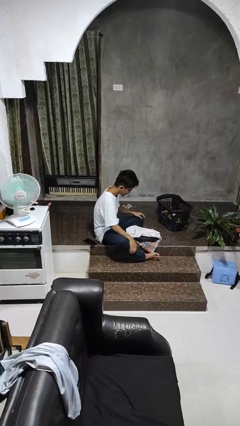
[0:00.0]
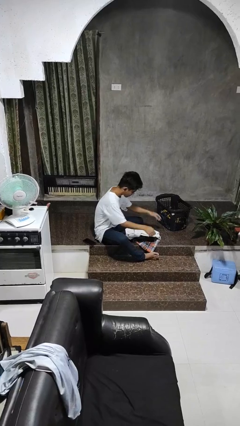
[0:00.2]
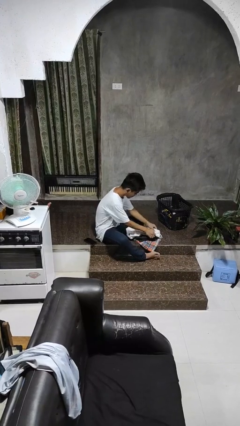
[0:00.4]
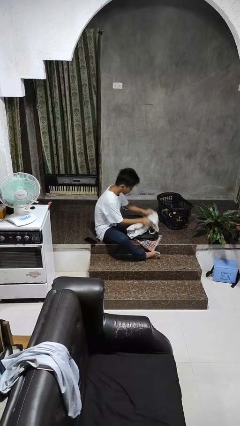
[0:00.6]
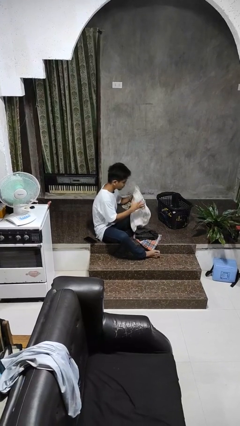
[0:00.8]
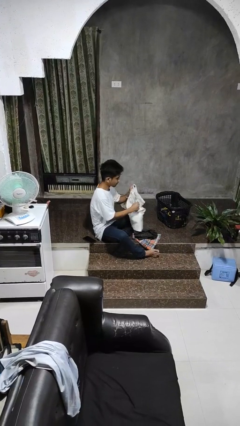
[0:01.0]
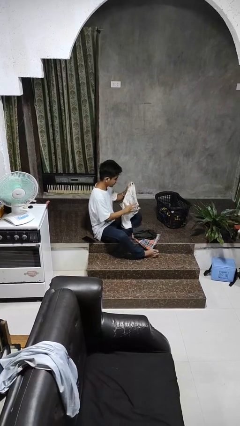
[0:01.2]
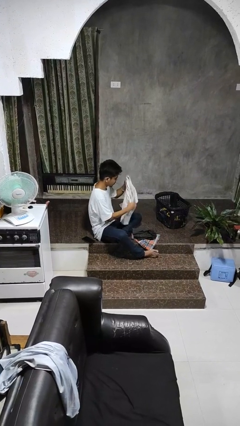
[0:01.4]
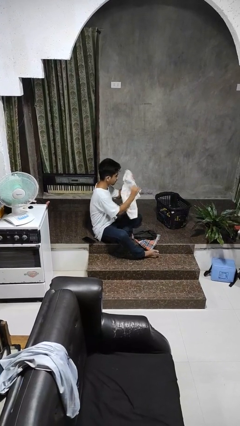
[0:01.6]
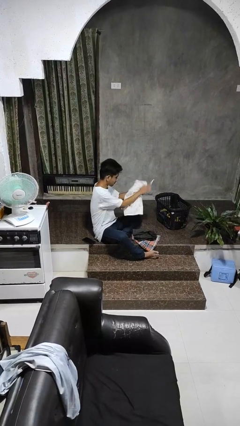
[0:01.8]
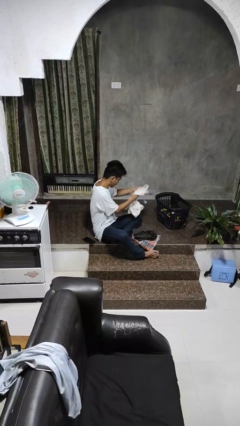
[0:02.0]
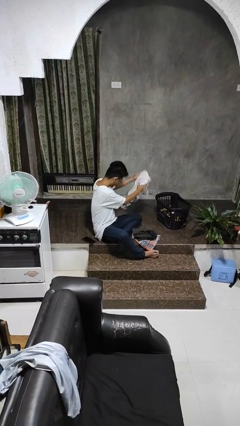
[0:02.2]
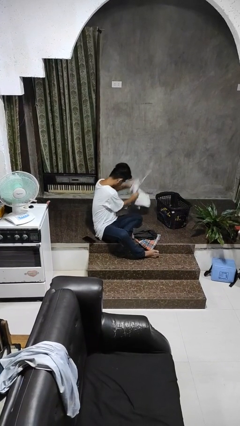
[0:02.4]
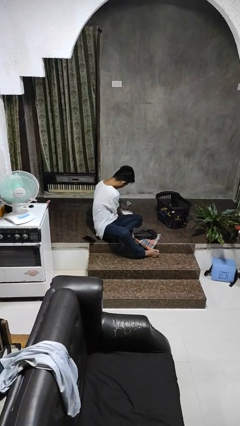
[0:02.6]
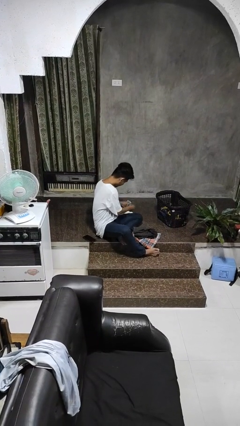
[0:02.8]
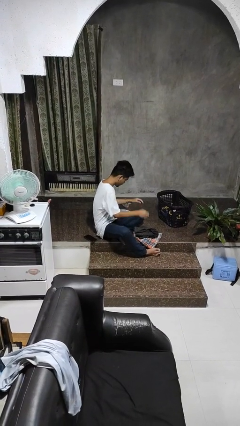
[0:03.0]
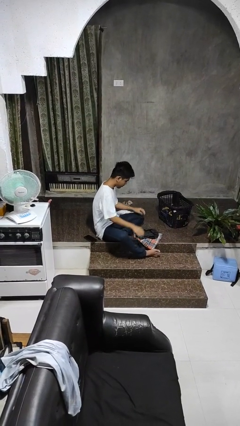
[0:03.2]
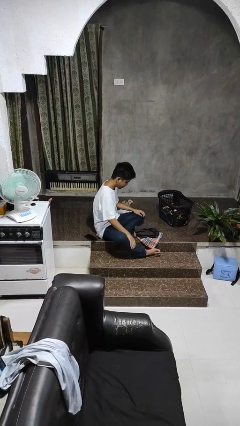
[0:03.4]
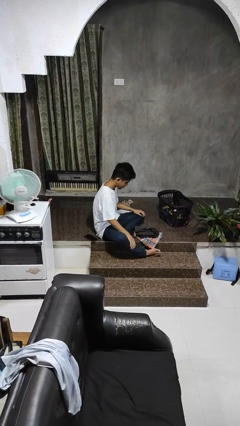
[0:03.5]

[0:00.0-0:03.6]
person folds pants

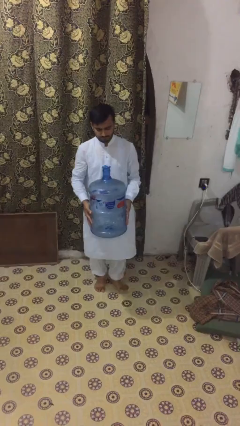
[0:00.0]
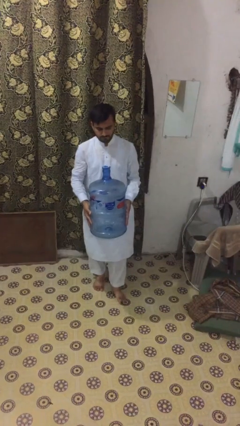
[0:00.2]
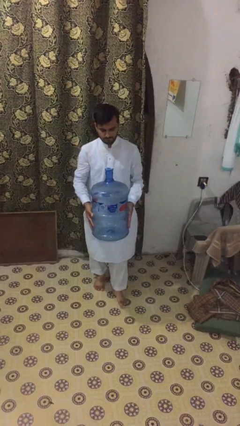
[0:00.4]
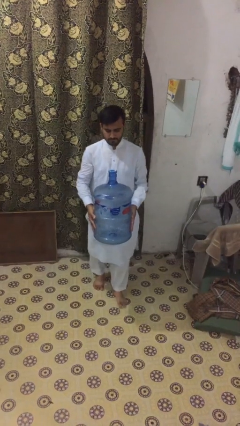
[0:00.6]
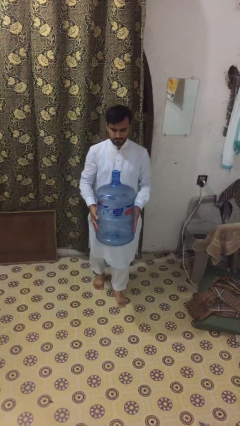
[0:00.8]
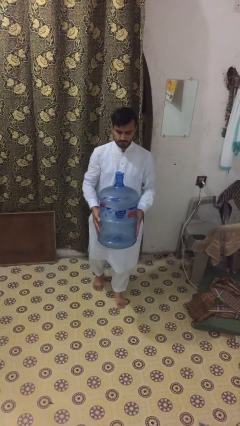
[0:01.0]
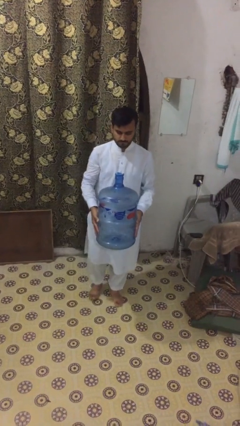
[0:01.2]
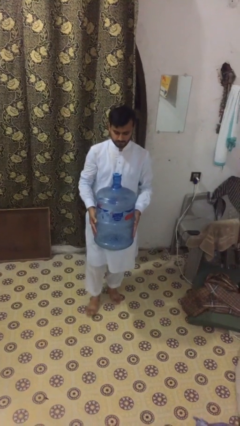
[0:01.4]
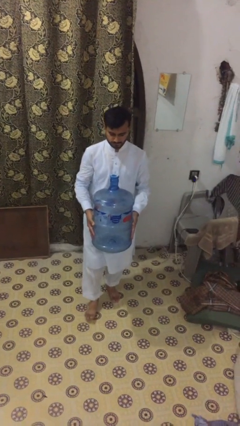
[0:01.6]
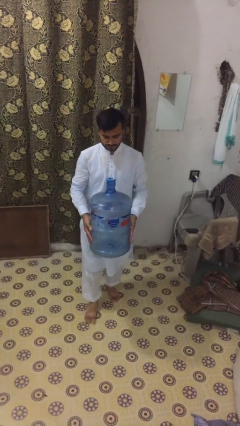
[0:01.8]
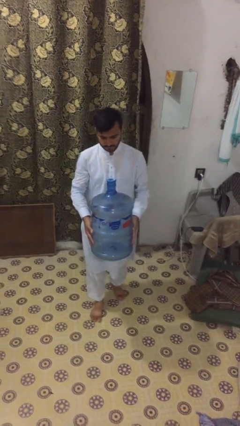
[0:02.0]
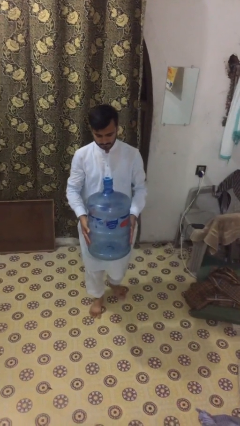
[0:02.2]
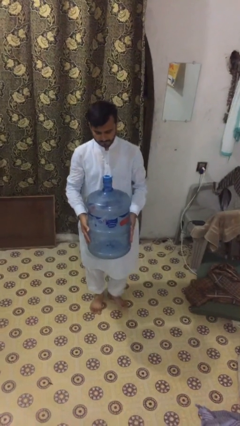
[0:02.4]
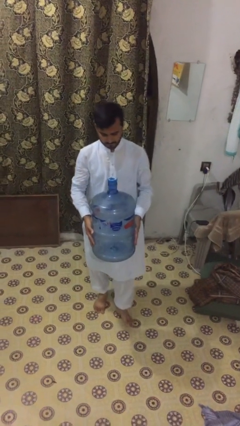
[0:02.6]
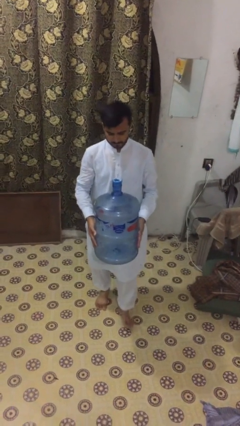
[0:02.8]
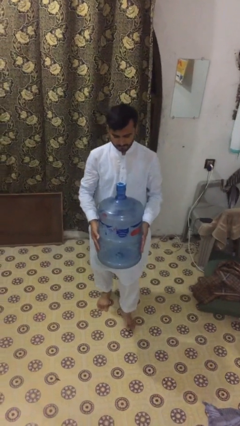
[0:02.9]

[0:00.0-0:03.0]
person carries heavy object

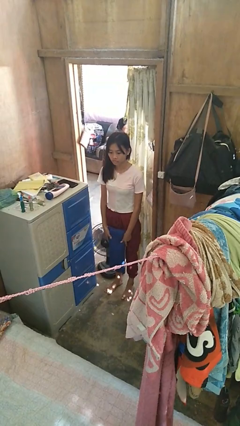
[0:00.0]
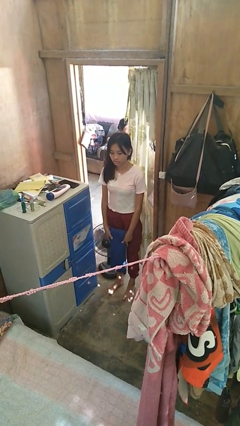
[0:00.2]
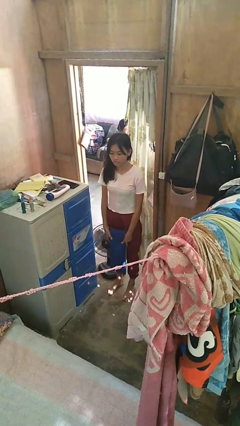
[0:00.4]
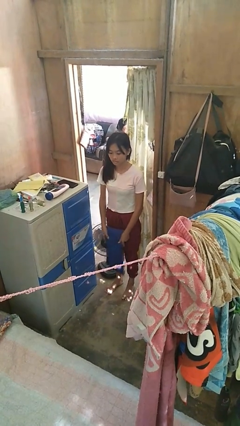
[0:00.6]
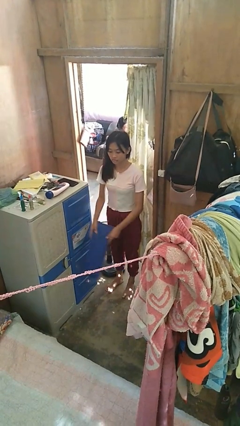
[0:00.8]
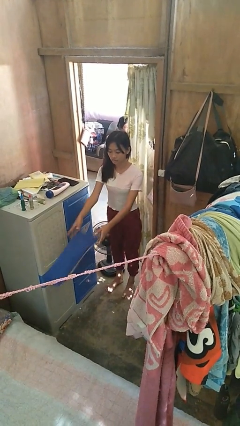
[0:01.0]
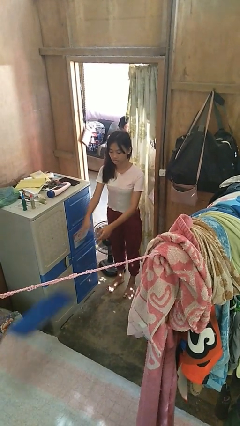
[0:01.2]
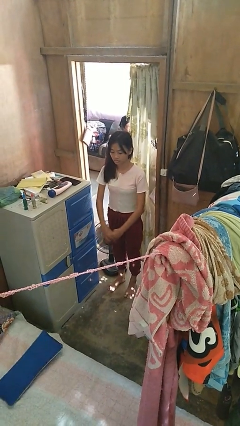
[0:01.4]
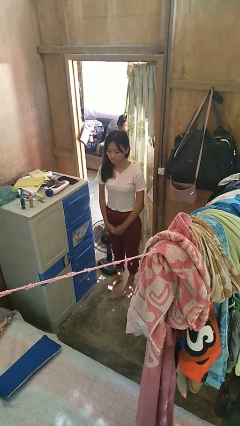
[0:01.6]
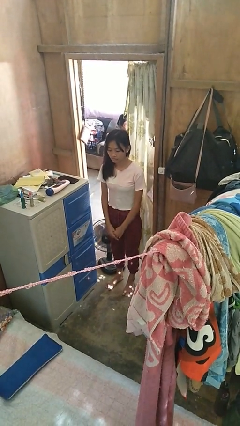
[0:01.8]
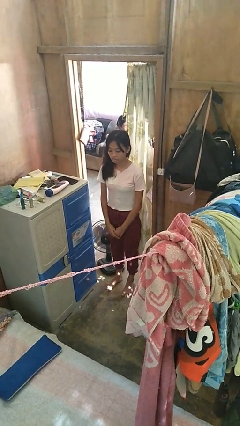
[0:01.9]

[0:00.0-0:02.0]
person throws object on bed

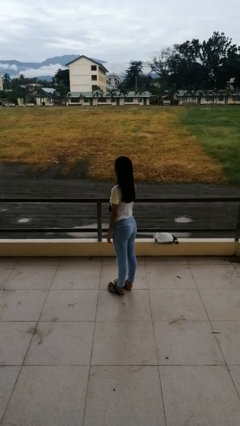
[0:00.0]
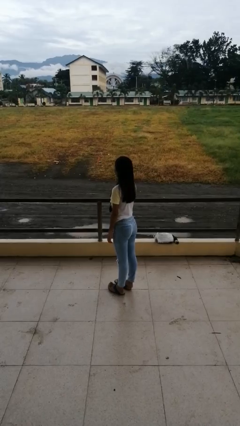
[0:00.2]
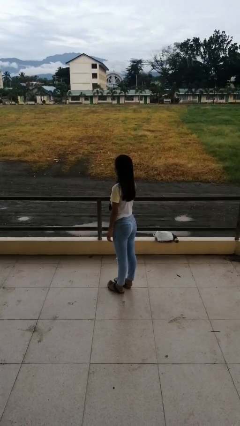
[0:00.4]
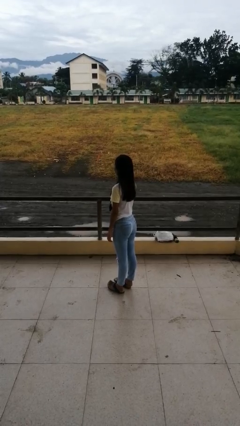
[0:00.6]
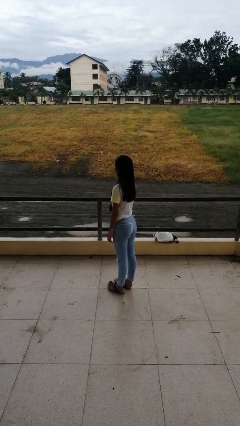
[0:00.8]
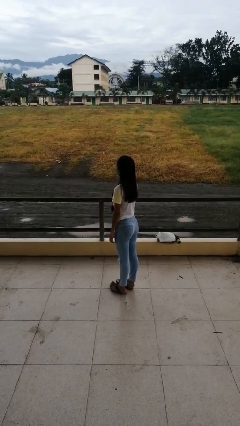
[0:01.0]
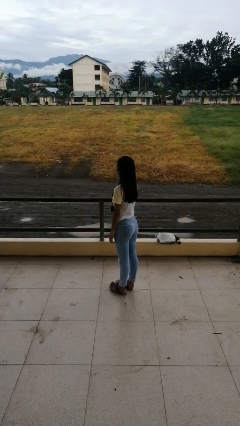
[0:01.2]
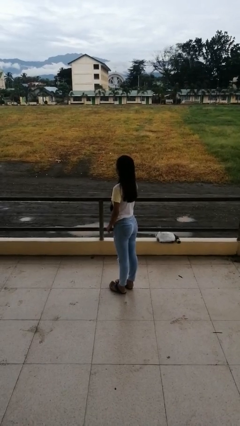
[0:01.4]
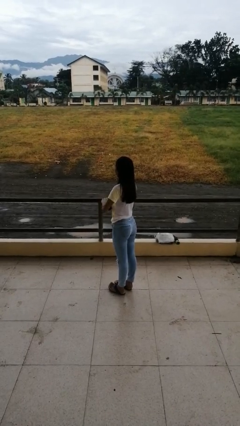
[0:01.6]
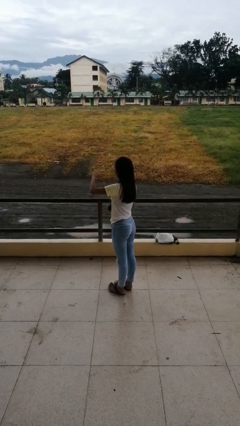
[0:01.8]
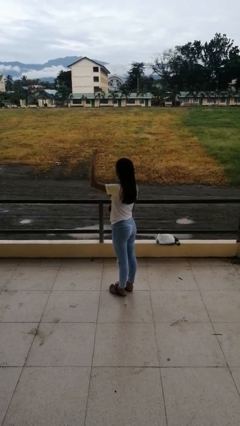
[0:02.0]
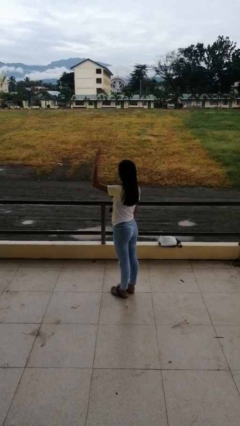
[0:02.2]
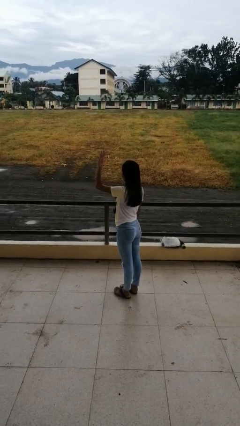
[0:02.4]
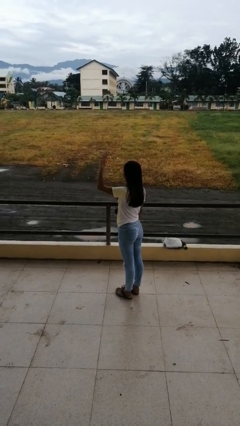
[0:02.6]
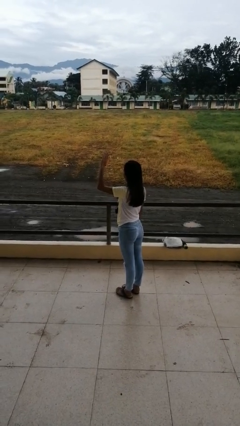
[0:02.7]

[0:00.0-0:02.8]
person gestures swipe up

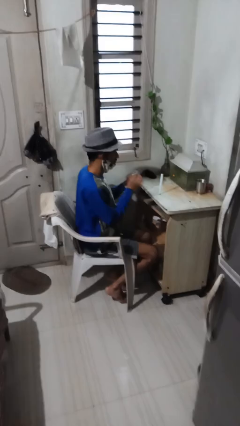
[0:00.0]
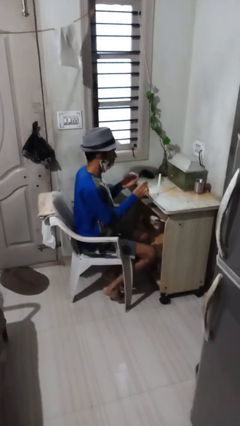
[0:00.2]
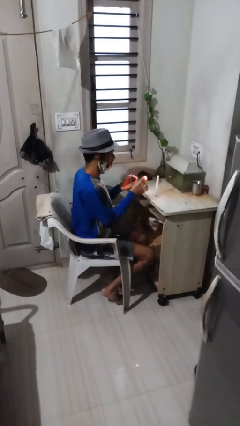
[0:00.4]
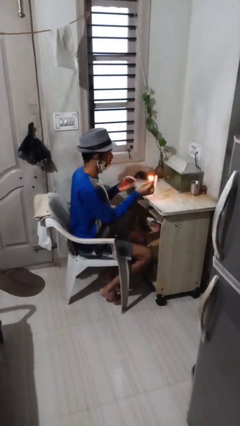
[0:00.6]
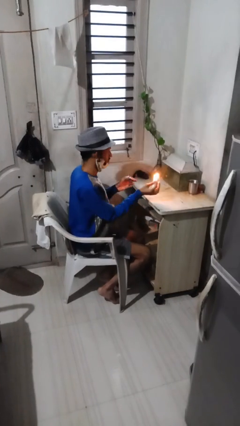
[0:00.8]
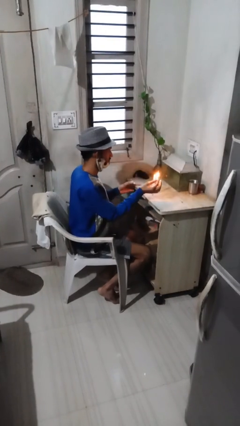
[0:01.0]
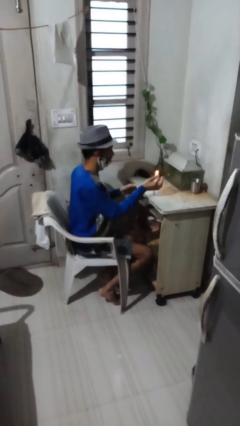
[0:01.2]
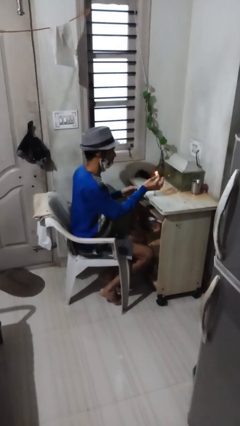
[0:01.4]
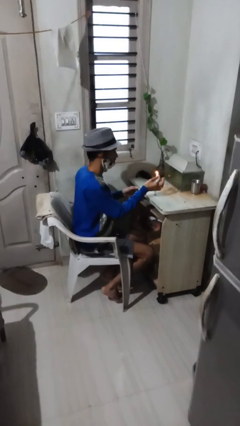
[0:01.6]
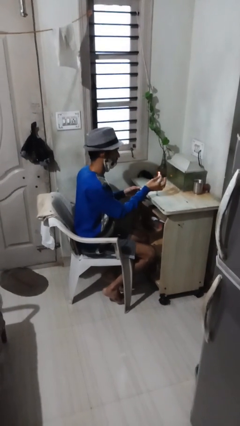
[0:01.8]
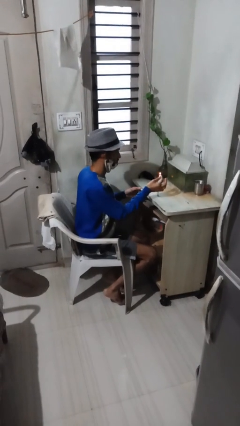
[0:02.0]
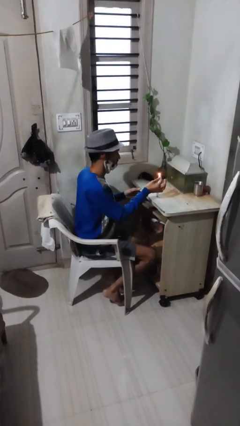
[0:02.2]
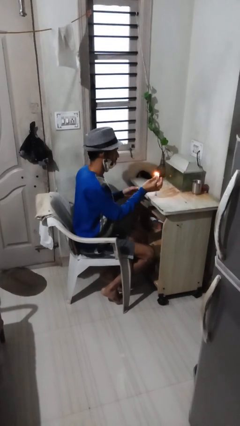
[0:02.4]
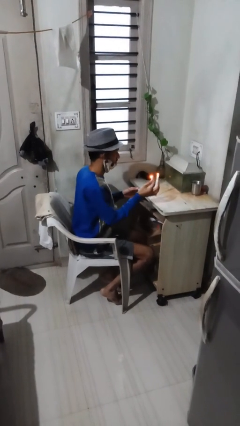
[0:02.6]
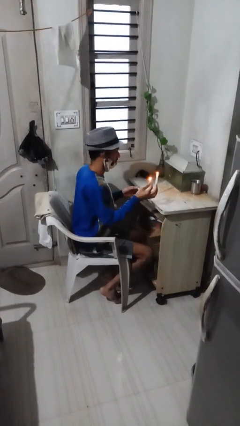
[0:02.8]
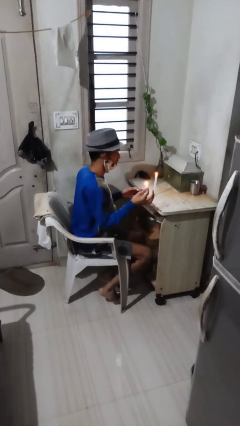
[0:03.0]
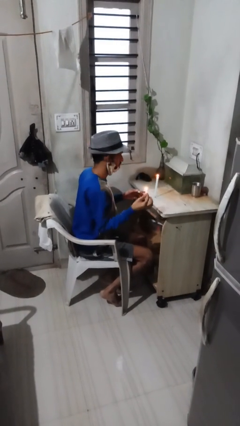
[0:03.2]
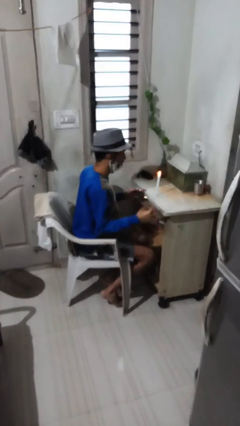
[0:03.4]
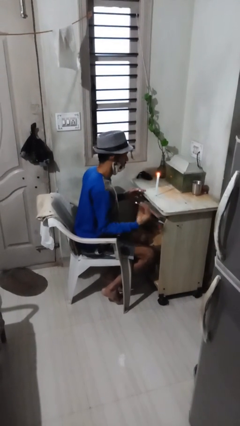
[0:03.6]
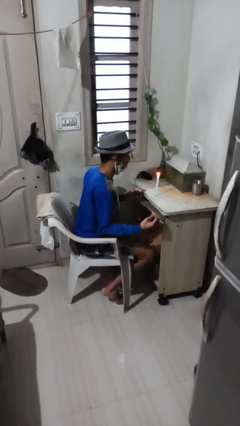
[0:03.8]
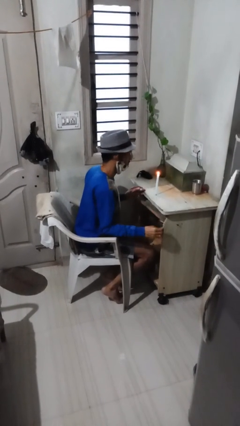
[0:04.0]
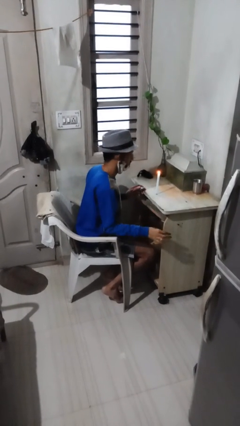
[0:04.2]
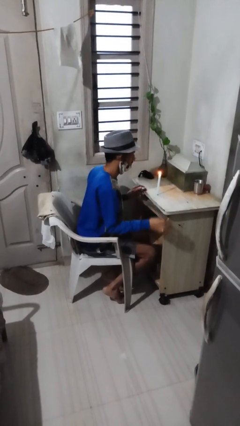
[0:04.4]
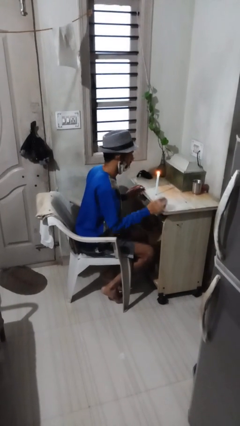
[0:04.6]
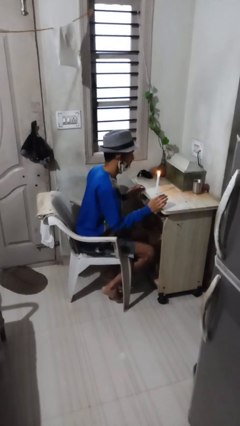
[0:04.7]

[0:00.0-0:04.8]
person lights candle

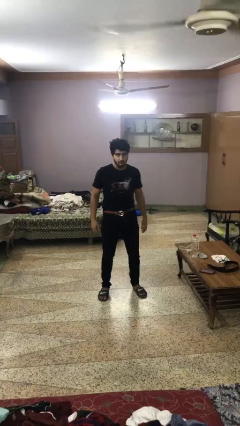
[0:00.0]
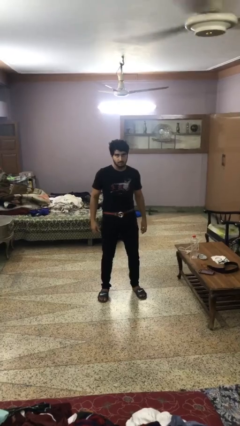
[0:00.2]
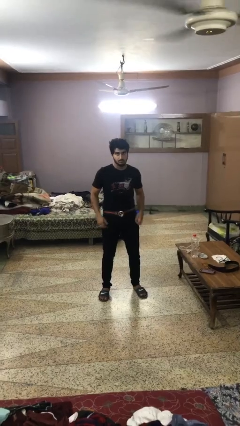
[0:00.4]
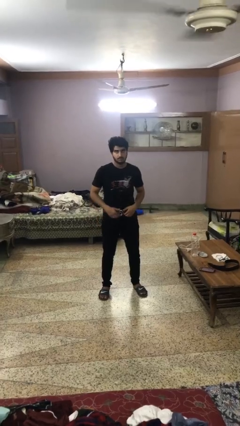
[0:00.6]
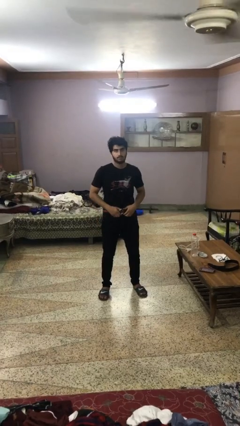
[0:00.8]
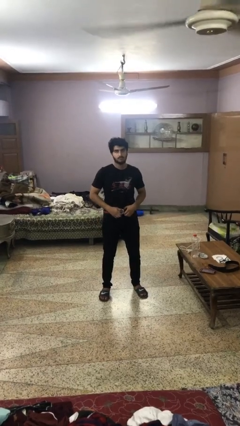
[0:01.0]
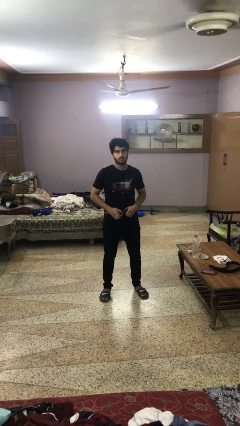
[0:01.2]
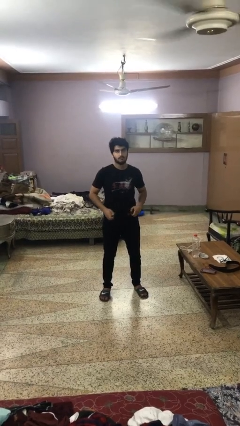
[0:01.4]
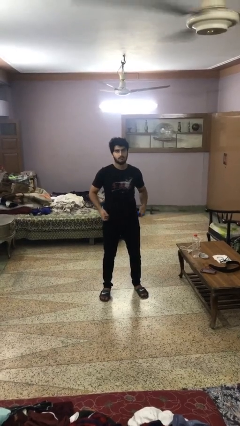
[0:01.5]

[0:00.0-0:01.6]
person takes off belt
